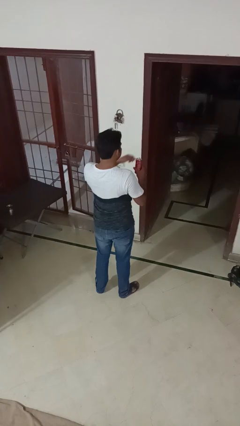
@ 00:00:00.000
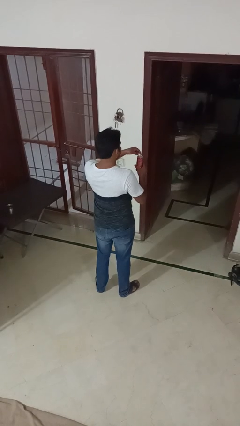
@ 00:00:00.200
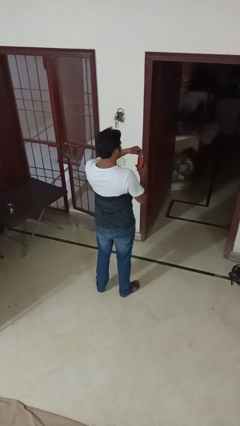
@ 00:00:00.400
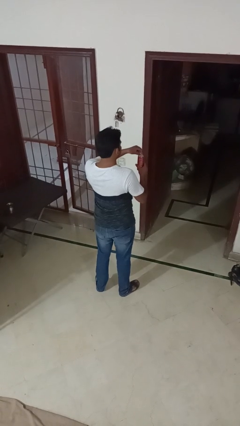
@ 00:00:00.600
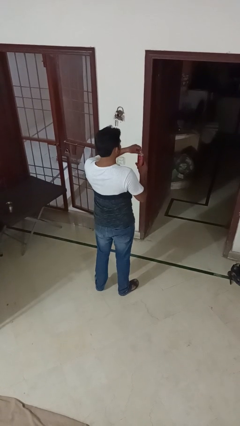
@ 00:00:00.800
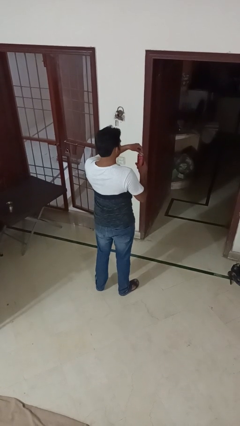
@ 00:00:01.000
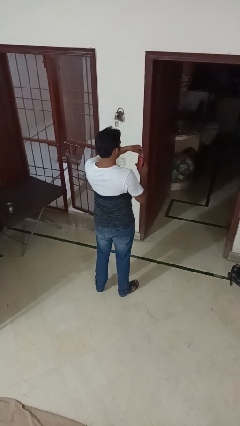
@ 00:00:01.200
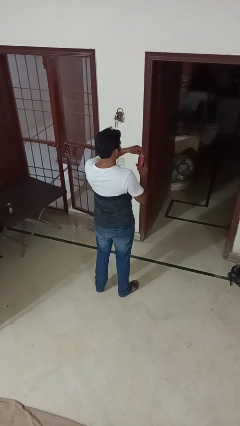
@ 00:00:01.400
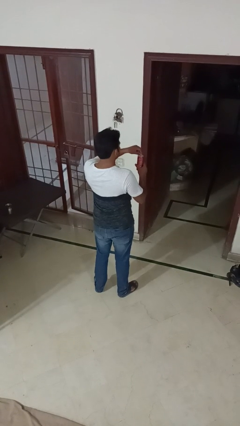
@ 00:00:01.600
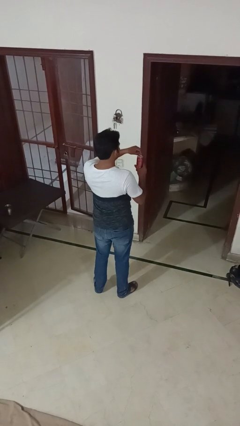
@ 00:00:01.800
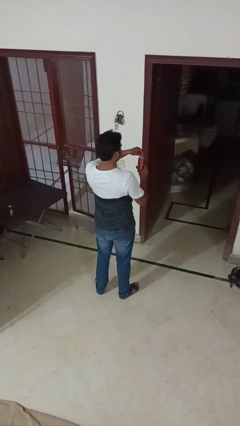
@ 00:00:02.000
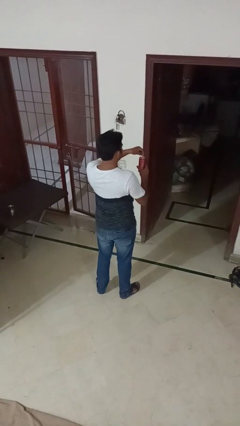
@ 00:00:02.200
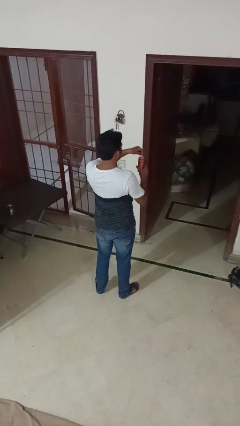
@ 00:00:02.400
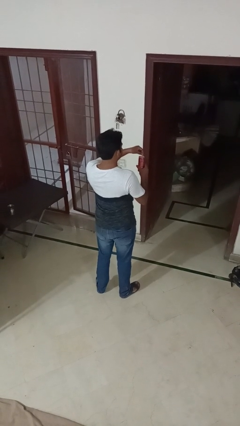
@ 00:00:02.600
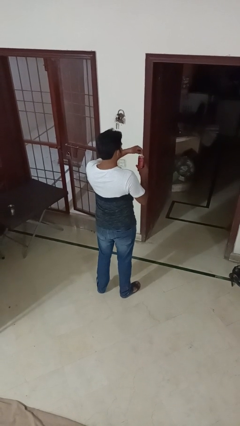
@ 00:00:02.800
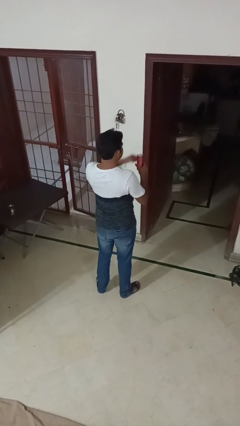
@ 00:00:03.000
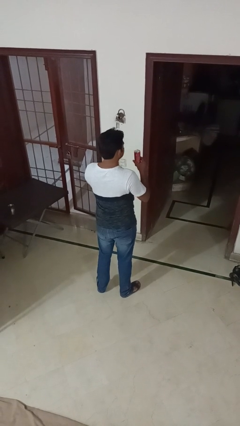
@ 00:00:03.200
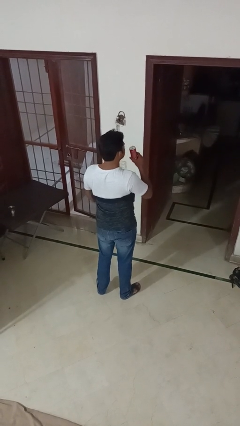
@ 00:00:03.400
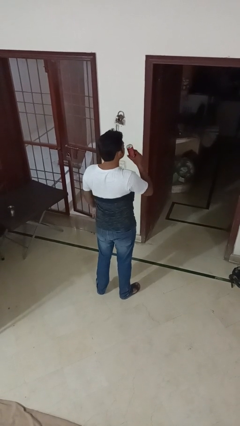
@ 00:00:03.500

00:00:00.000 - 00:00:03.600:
person opens beverage can

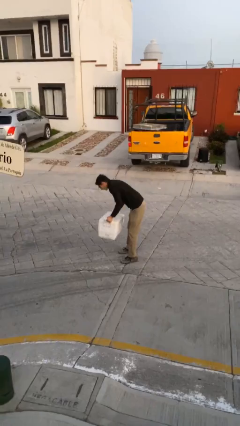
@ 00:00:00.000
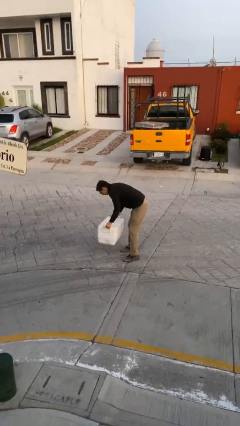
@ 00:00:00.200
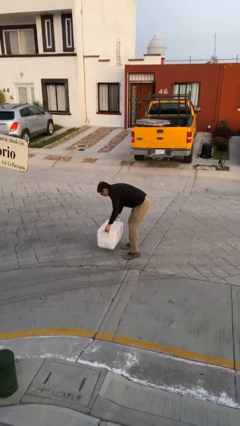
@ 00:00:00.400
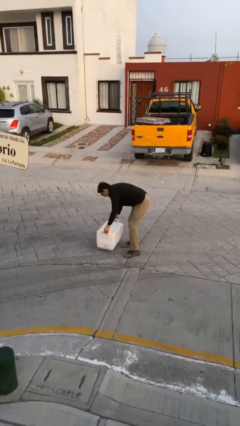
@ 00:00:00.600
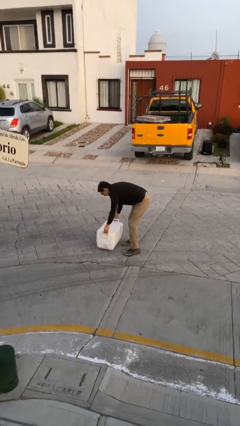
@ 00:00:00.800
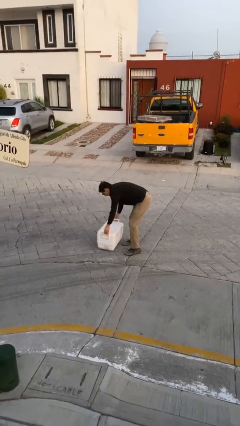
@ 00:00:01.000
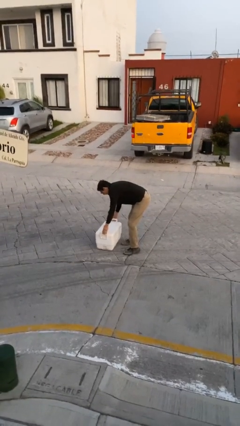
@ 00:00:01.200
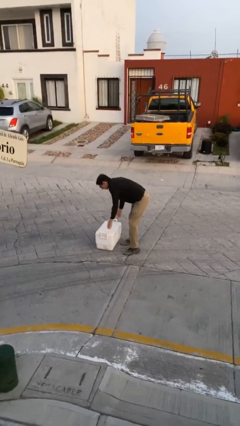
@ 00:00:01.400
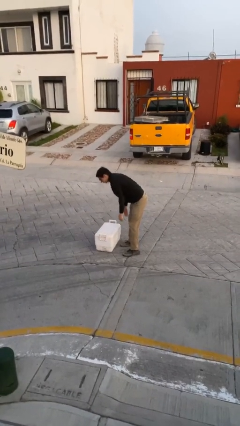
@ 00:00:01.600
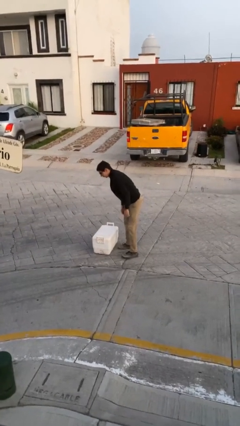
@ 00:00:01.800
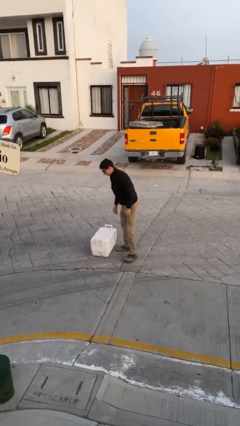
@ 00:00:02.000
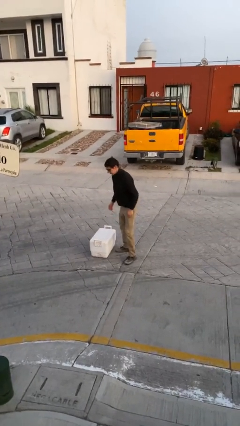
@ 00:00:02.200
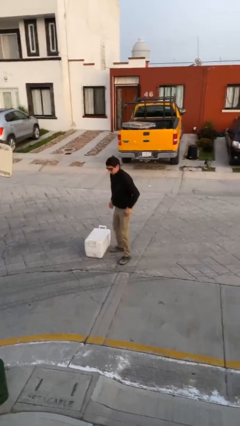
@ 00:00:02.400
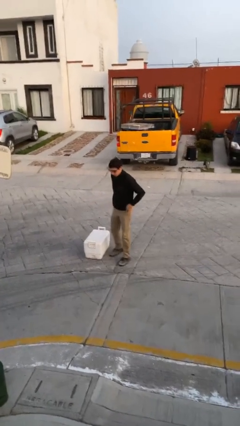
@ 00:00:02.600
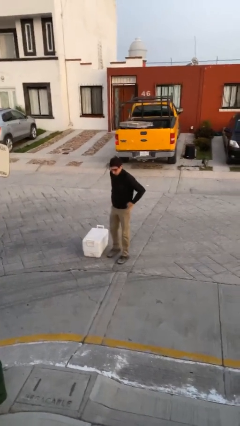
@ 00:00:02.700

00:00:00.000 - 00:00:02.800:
person puts down object on floor

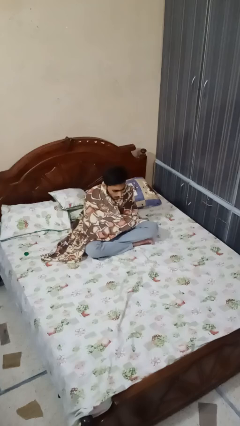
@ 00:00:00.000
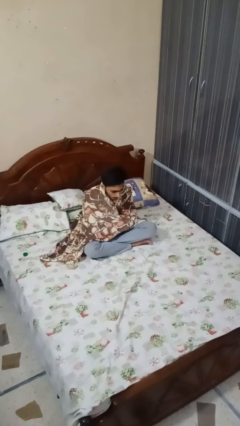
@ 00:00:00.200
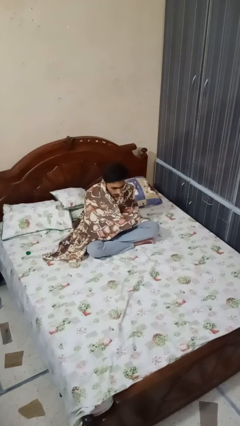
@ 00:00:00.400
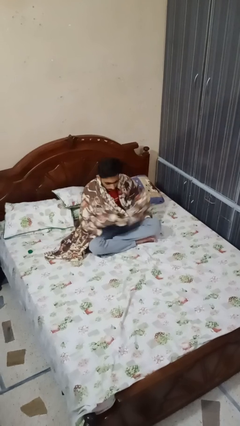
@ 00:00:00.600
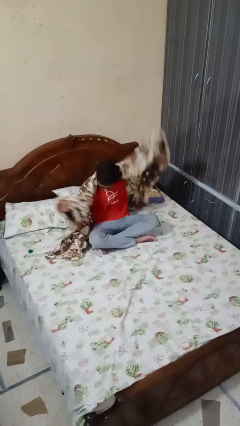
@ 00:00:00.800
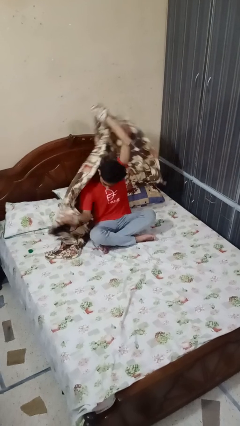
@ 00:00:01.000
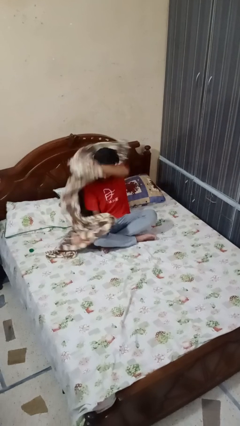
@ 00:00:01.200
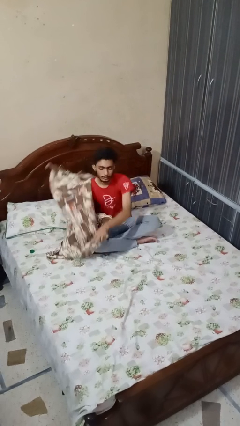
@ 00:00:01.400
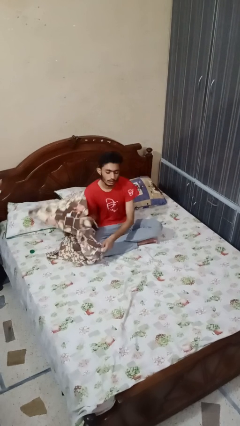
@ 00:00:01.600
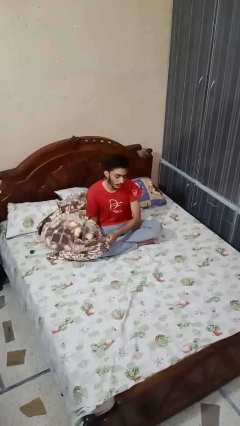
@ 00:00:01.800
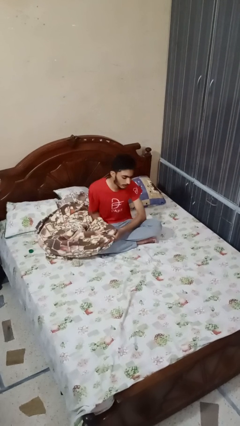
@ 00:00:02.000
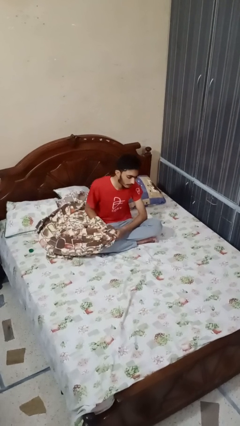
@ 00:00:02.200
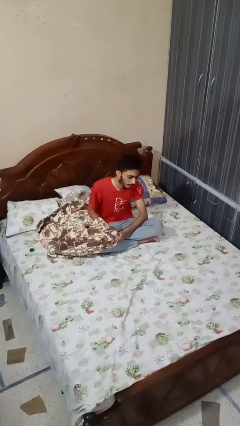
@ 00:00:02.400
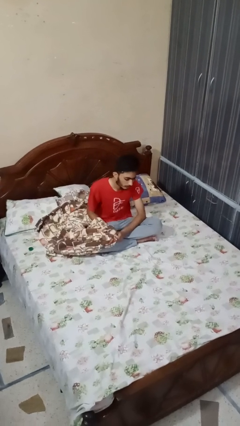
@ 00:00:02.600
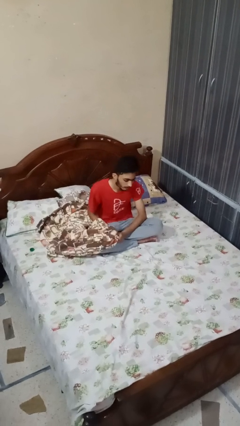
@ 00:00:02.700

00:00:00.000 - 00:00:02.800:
person uncovers with blanket

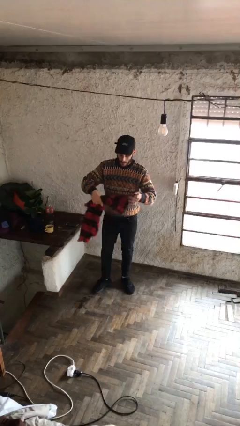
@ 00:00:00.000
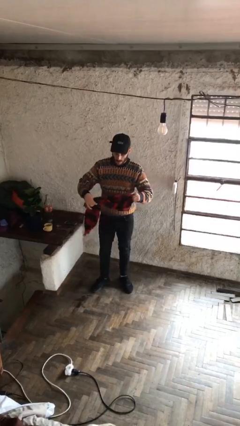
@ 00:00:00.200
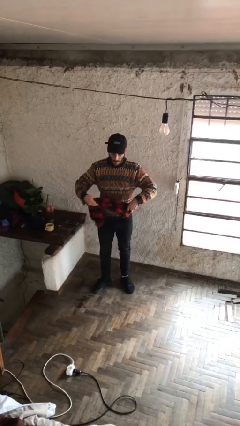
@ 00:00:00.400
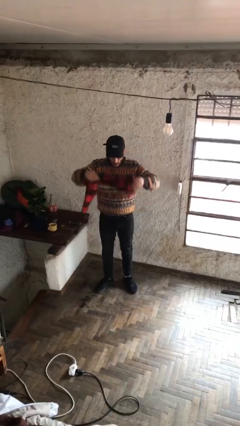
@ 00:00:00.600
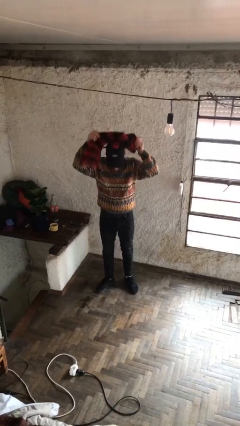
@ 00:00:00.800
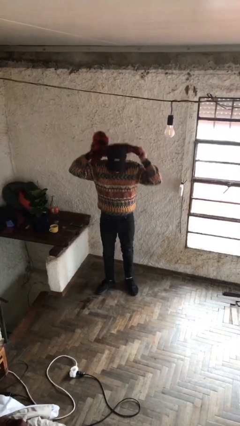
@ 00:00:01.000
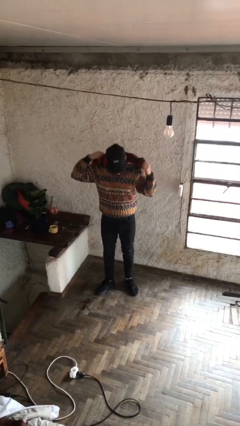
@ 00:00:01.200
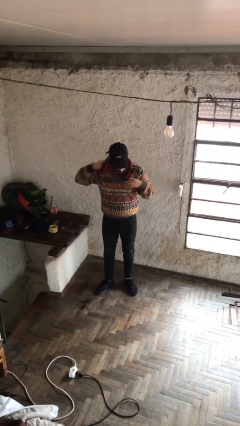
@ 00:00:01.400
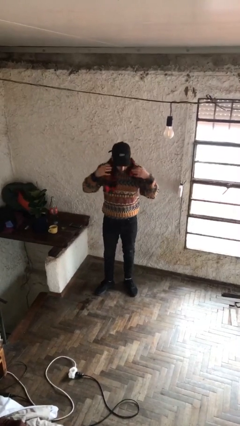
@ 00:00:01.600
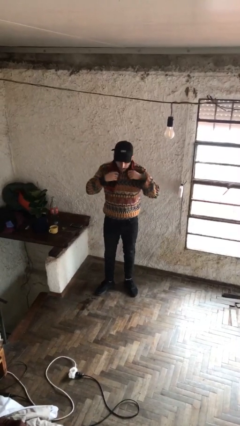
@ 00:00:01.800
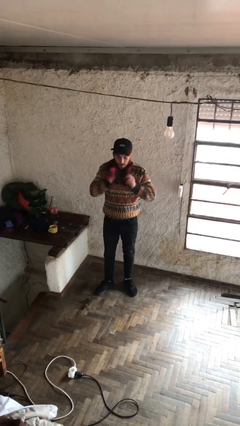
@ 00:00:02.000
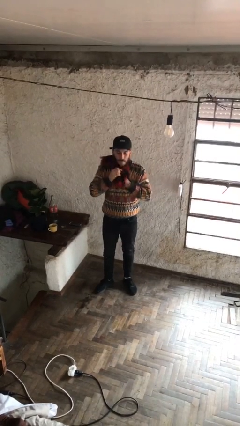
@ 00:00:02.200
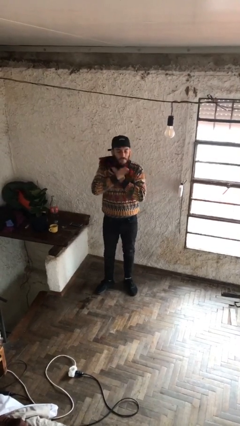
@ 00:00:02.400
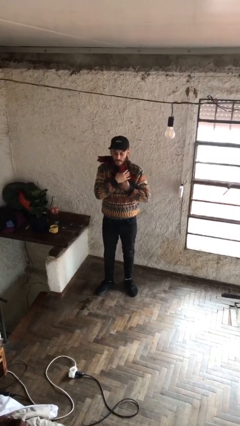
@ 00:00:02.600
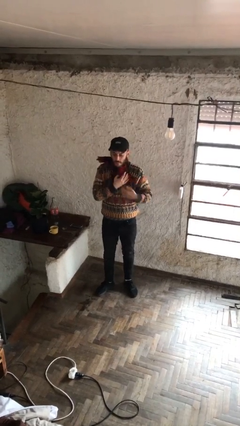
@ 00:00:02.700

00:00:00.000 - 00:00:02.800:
person puts on scarf

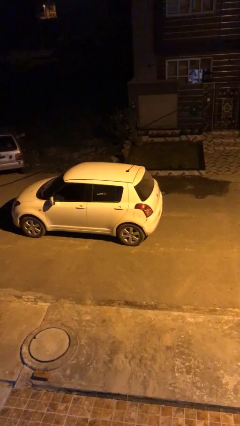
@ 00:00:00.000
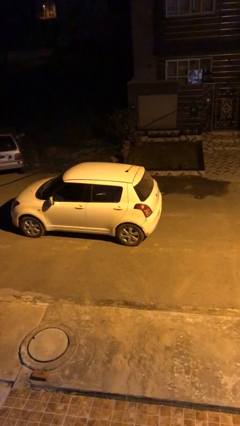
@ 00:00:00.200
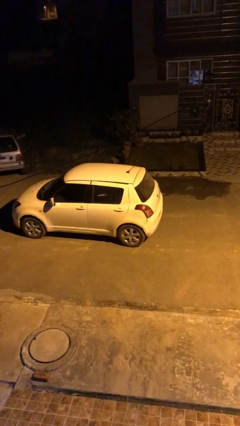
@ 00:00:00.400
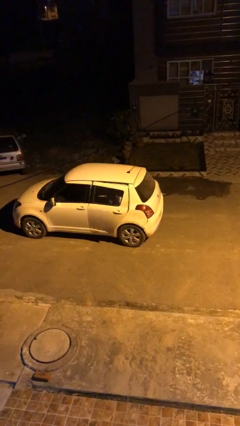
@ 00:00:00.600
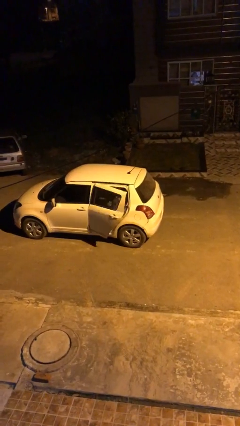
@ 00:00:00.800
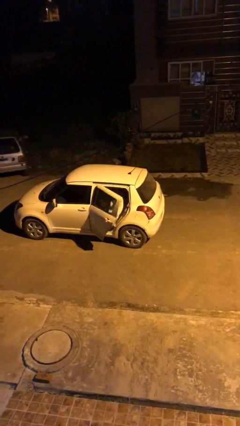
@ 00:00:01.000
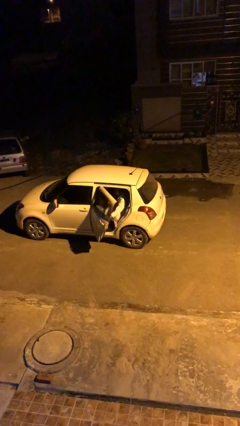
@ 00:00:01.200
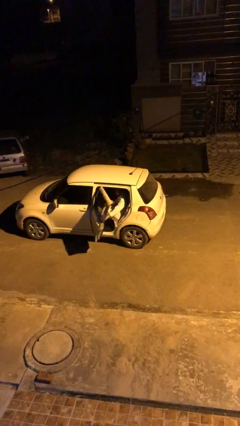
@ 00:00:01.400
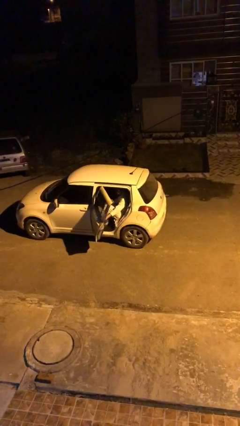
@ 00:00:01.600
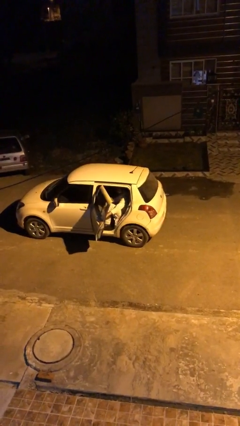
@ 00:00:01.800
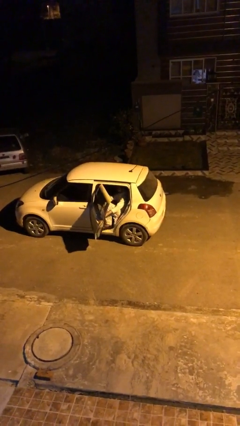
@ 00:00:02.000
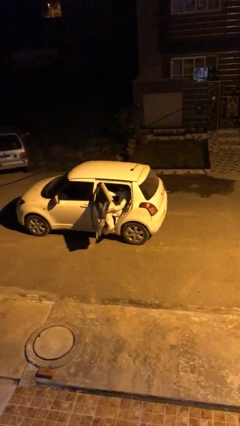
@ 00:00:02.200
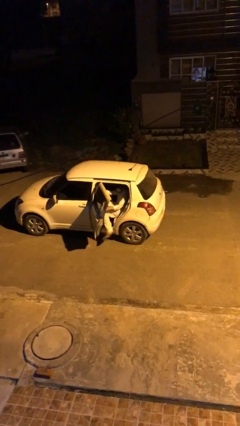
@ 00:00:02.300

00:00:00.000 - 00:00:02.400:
person opens car door

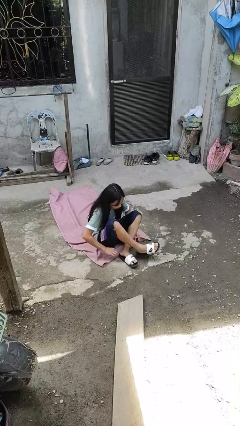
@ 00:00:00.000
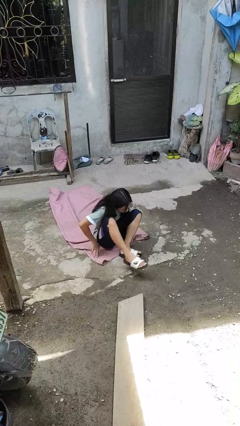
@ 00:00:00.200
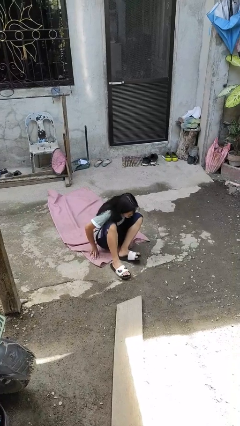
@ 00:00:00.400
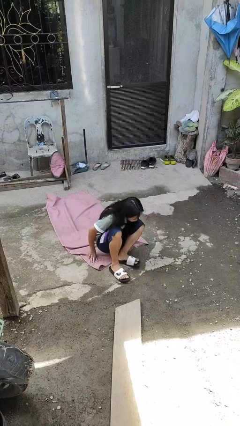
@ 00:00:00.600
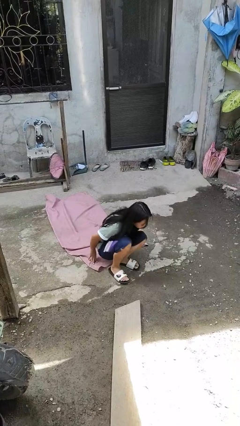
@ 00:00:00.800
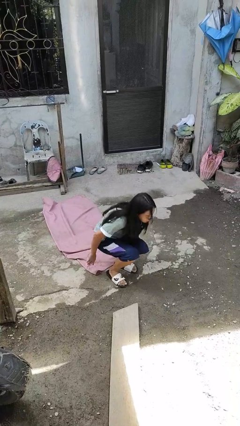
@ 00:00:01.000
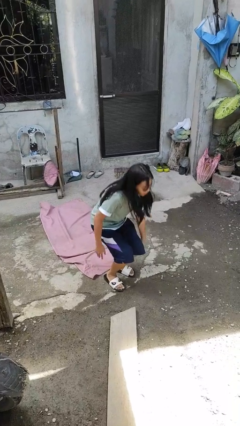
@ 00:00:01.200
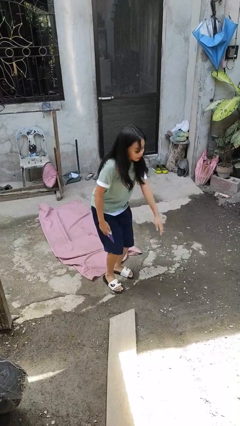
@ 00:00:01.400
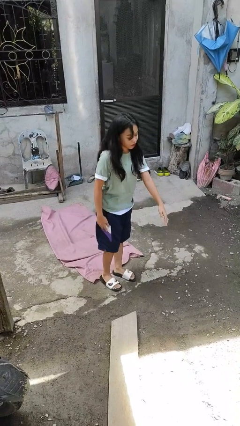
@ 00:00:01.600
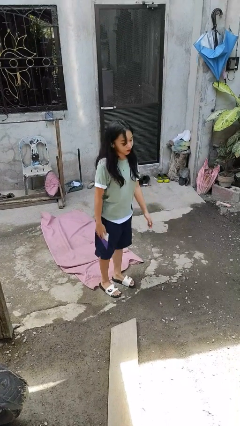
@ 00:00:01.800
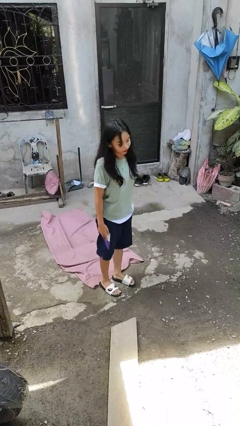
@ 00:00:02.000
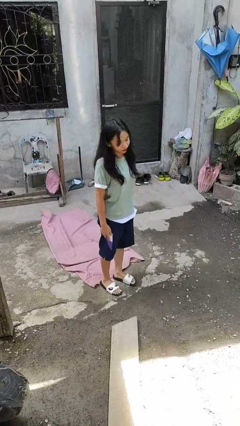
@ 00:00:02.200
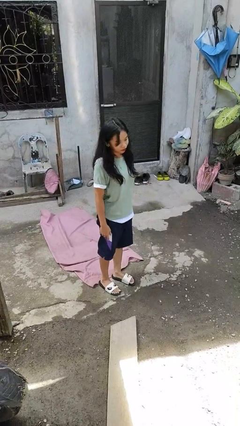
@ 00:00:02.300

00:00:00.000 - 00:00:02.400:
person stands up from floor
